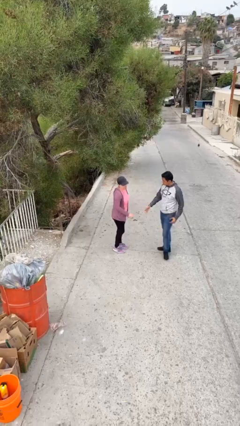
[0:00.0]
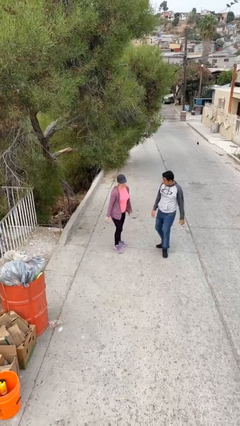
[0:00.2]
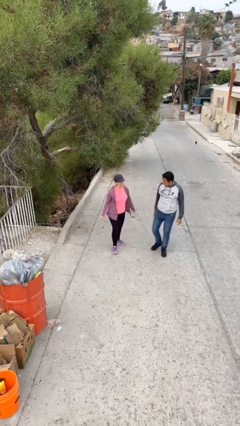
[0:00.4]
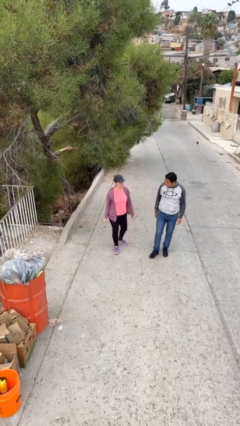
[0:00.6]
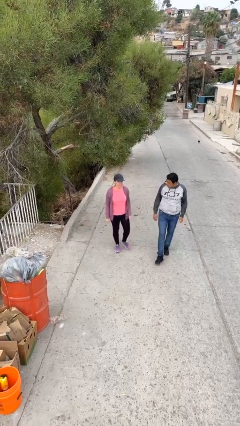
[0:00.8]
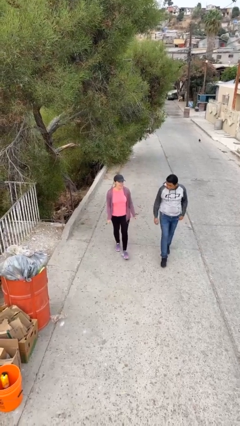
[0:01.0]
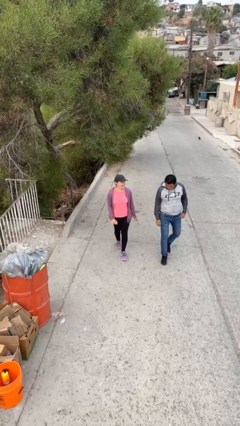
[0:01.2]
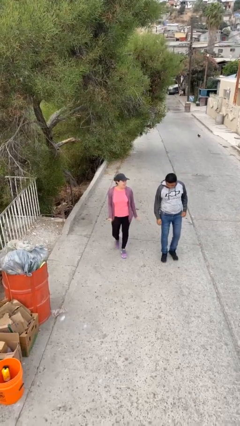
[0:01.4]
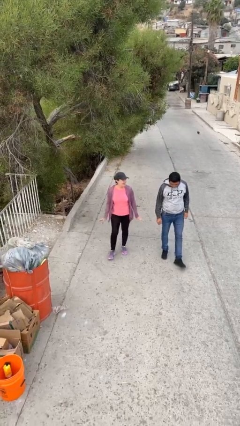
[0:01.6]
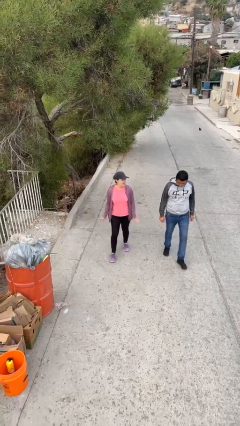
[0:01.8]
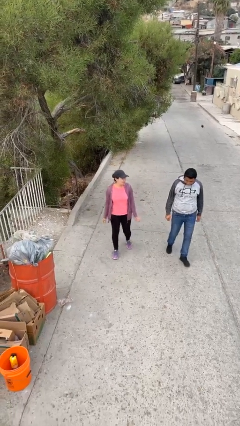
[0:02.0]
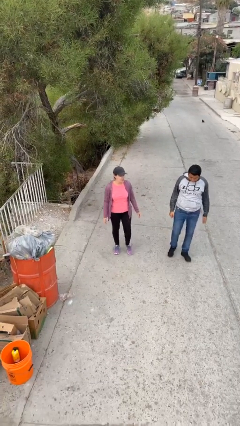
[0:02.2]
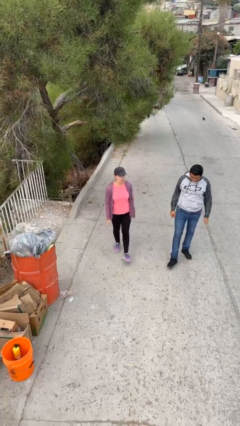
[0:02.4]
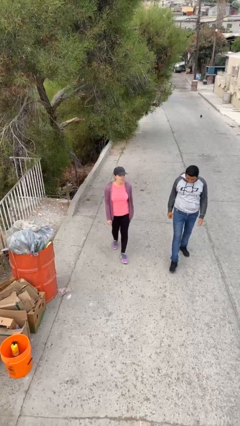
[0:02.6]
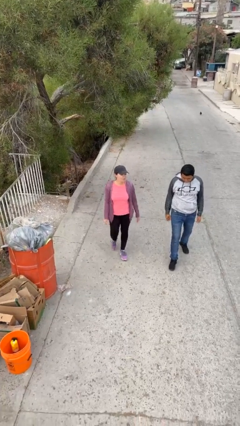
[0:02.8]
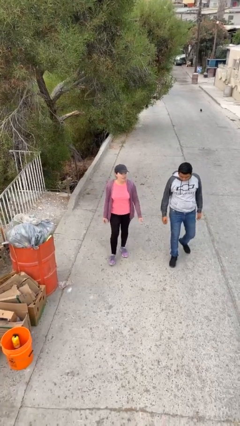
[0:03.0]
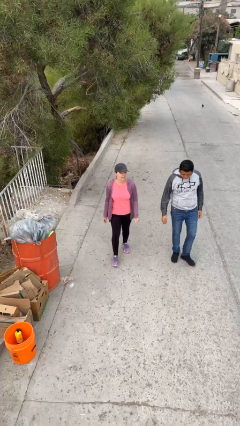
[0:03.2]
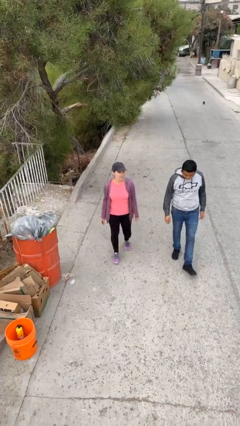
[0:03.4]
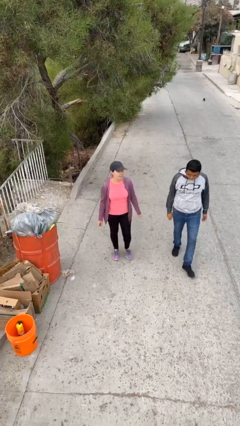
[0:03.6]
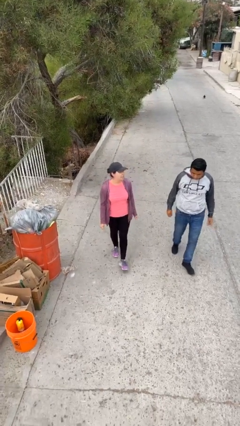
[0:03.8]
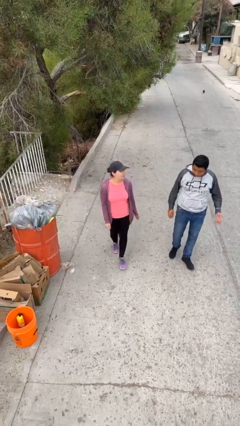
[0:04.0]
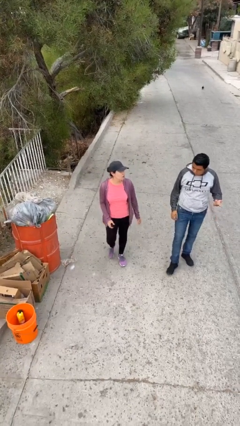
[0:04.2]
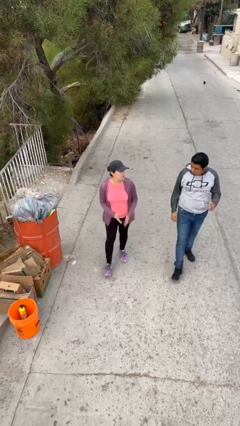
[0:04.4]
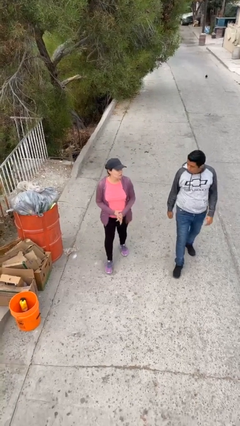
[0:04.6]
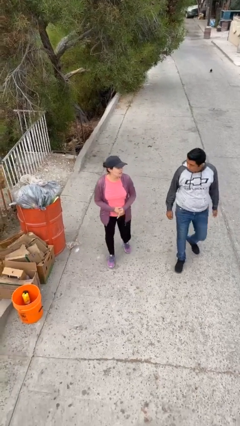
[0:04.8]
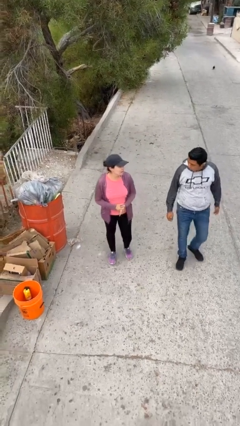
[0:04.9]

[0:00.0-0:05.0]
person talks to person

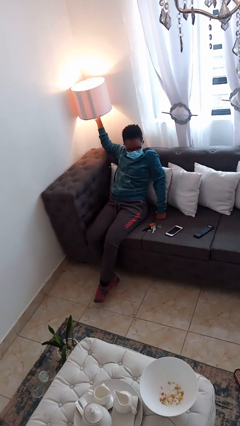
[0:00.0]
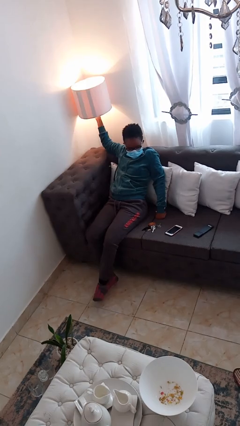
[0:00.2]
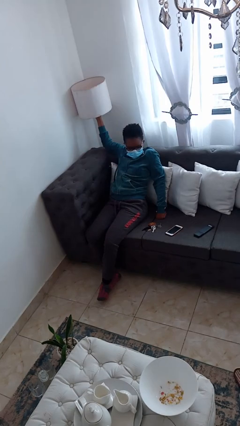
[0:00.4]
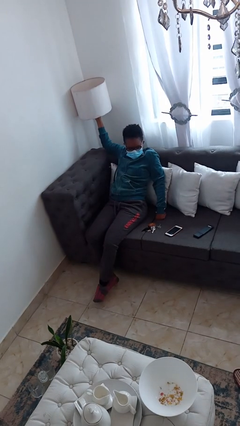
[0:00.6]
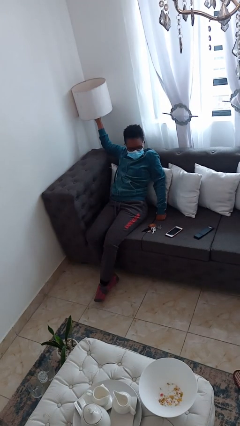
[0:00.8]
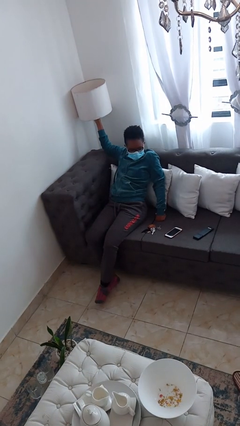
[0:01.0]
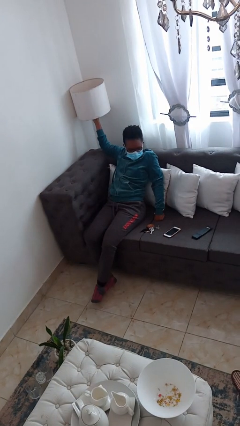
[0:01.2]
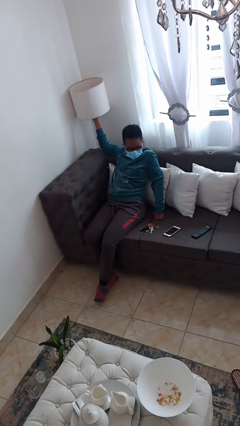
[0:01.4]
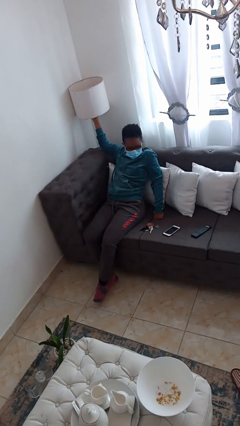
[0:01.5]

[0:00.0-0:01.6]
person turns off lamp

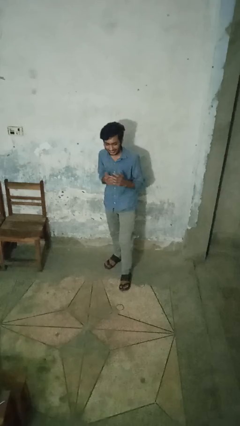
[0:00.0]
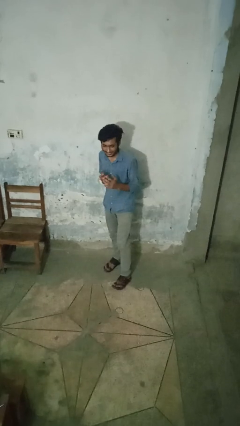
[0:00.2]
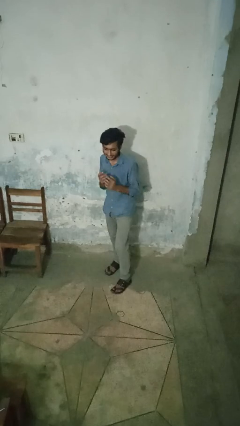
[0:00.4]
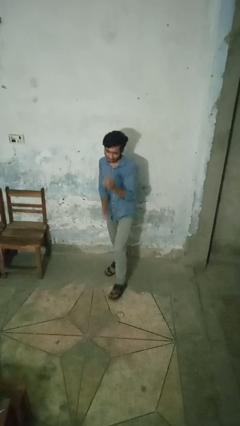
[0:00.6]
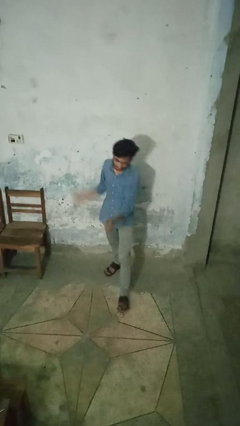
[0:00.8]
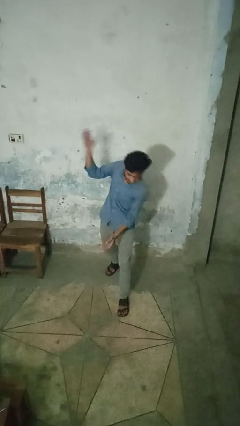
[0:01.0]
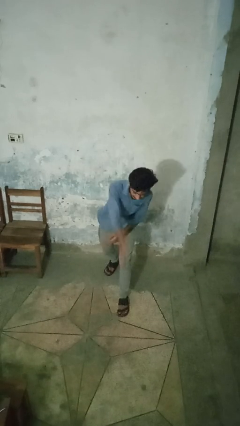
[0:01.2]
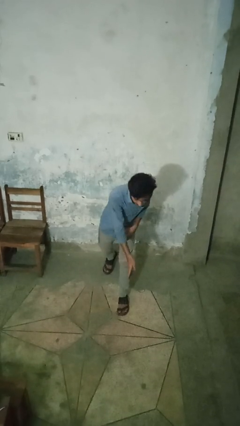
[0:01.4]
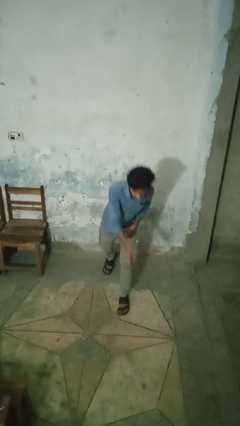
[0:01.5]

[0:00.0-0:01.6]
person karate chop

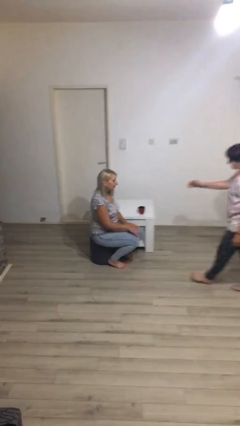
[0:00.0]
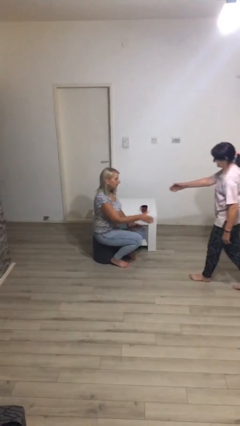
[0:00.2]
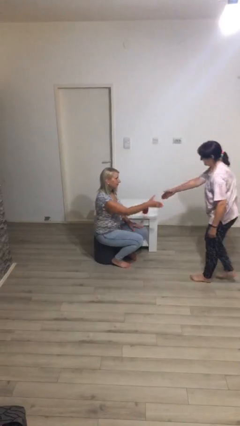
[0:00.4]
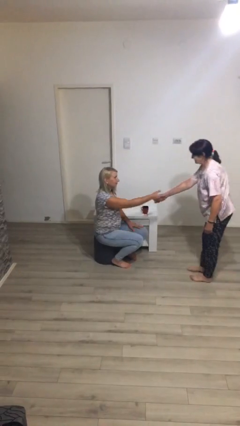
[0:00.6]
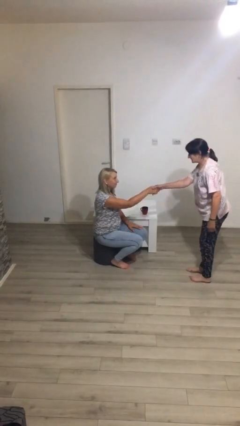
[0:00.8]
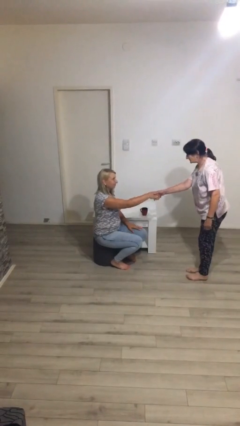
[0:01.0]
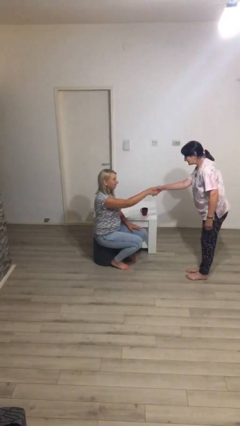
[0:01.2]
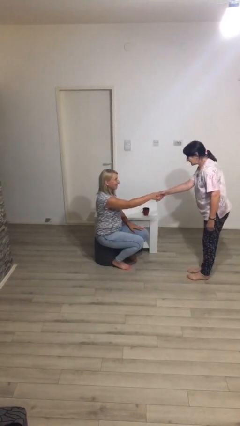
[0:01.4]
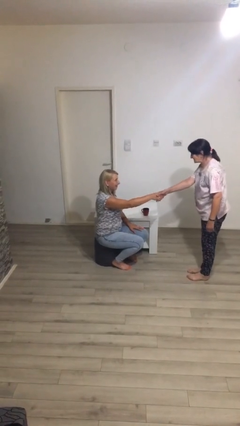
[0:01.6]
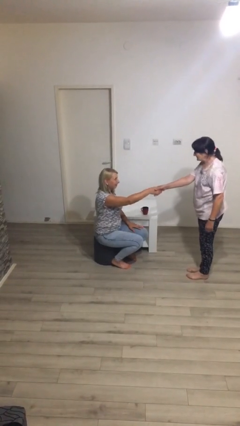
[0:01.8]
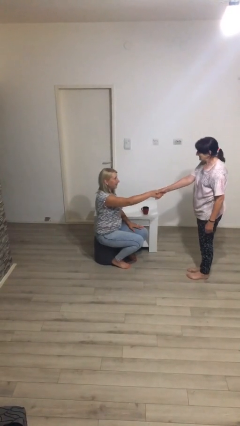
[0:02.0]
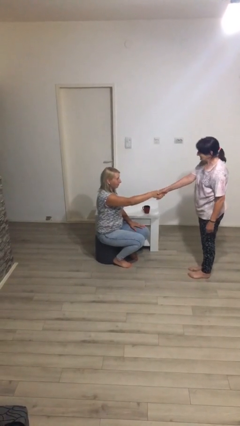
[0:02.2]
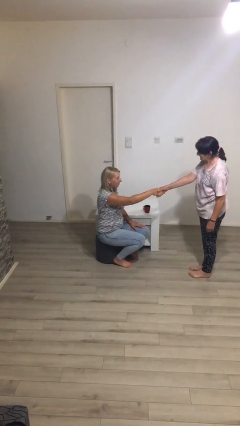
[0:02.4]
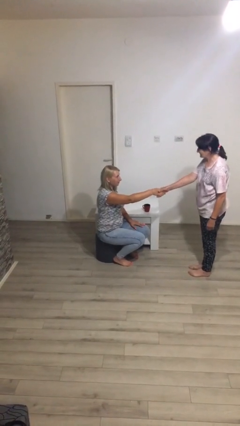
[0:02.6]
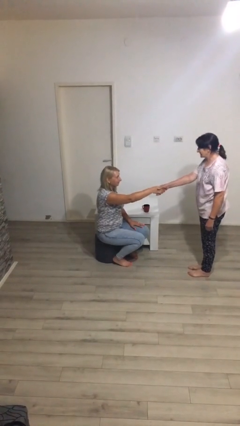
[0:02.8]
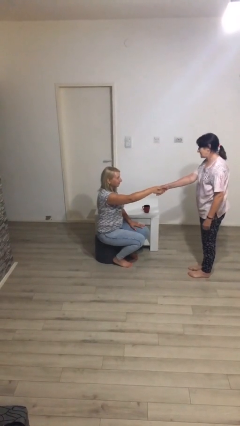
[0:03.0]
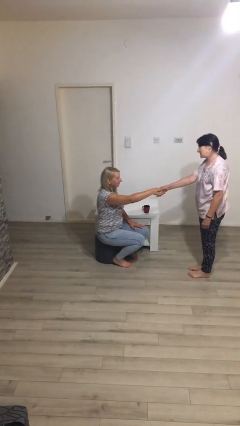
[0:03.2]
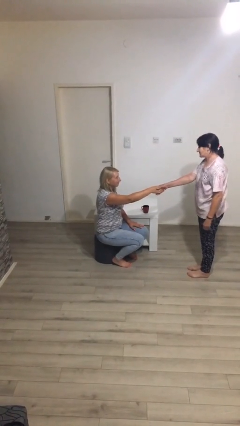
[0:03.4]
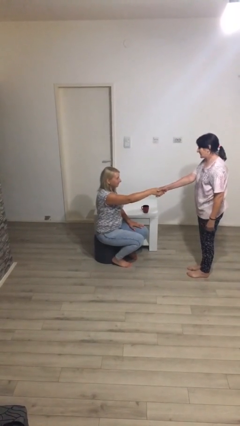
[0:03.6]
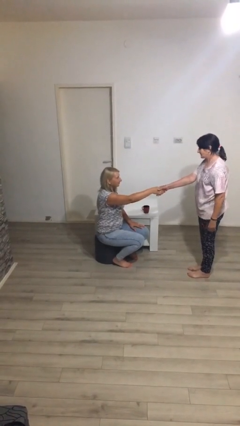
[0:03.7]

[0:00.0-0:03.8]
person shakes hand

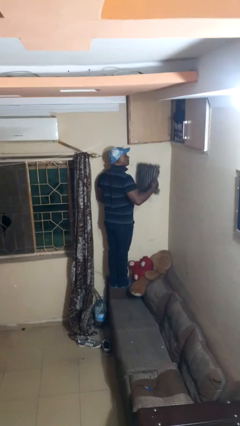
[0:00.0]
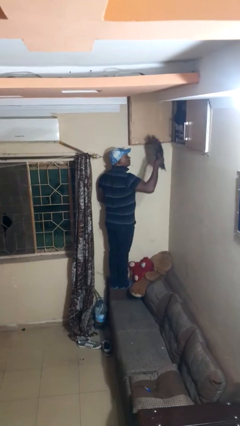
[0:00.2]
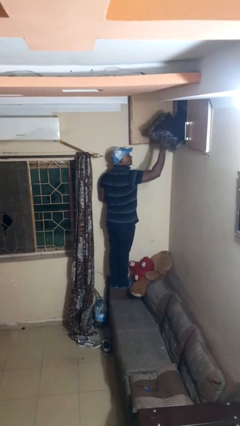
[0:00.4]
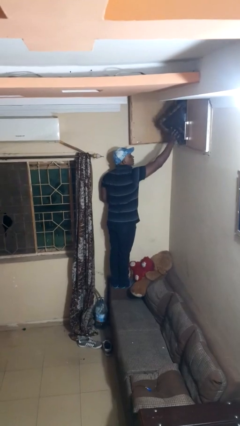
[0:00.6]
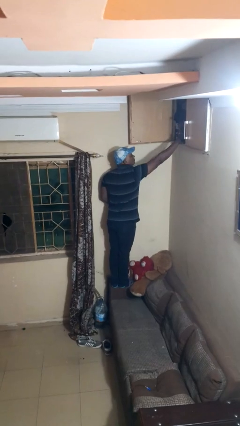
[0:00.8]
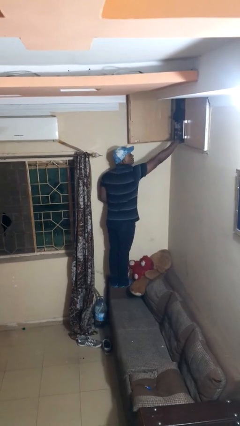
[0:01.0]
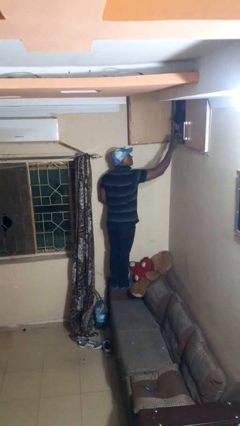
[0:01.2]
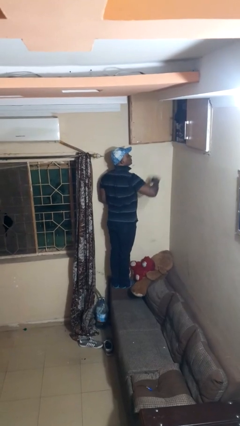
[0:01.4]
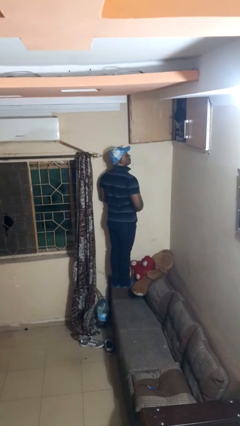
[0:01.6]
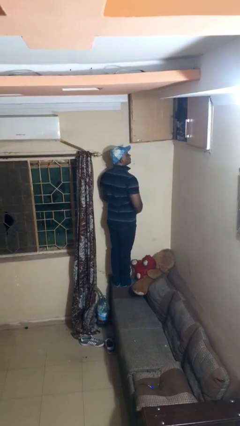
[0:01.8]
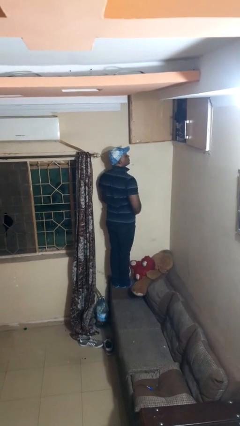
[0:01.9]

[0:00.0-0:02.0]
person puts object in cabinet

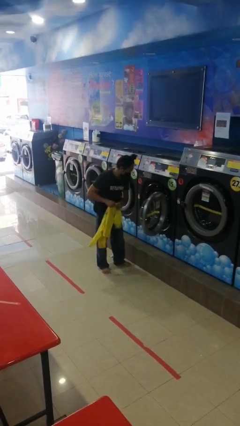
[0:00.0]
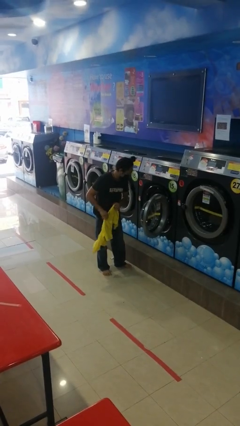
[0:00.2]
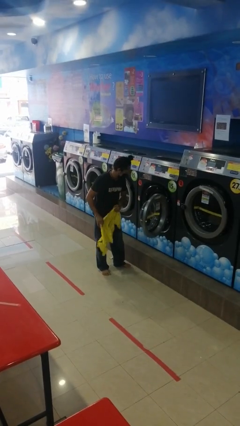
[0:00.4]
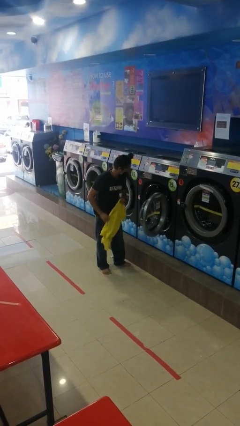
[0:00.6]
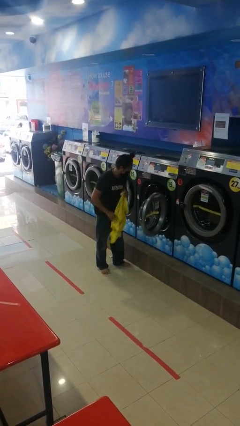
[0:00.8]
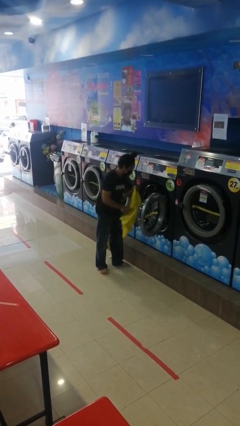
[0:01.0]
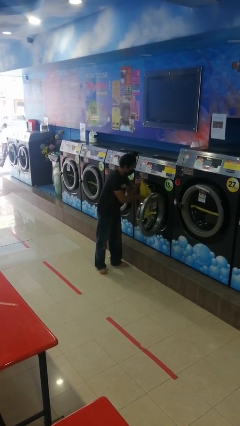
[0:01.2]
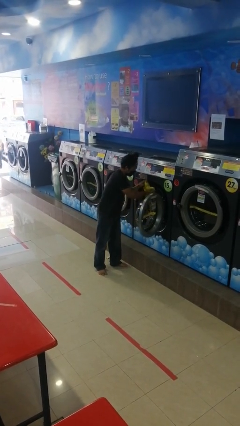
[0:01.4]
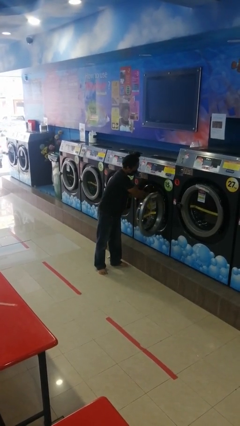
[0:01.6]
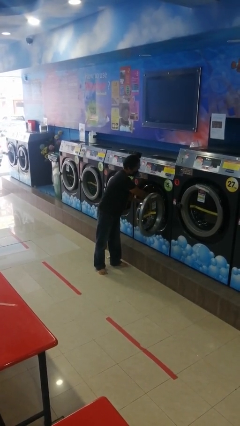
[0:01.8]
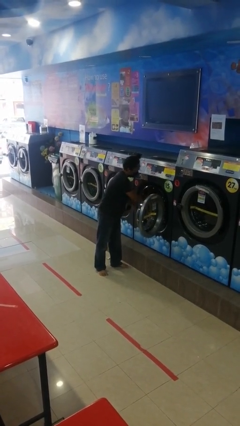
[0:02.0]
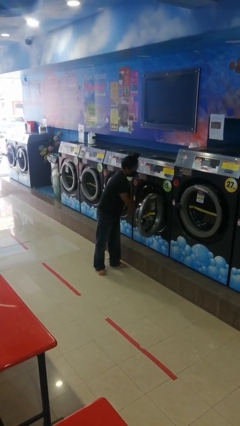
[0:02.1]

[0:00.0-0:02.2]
person loads clotheswasher

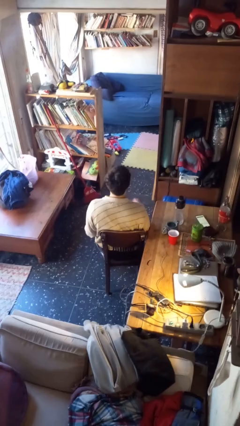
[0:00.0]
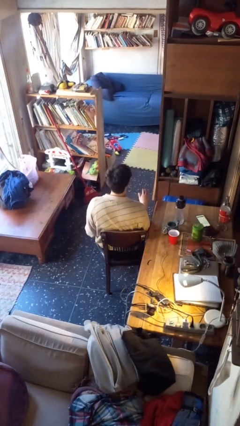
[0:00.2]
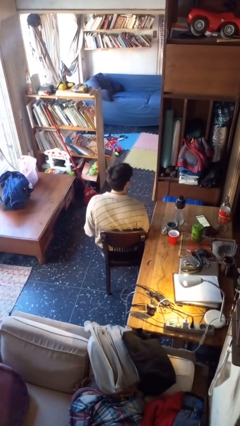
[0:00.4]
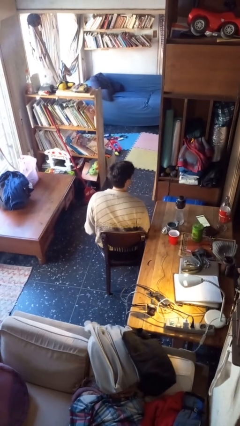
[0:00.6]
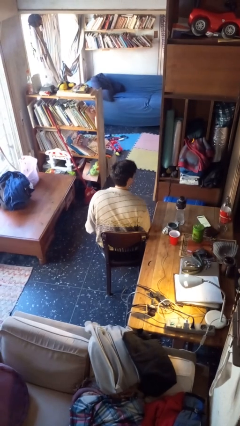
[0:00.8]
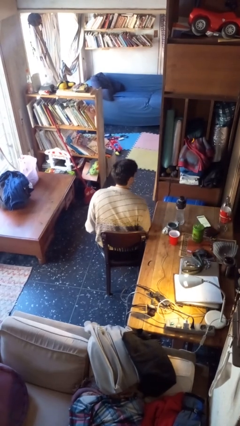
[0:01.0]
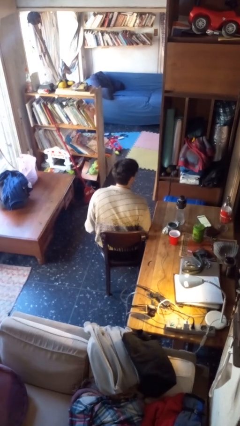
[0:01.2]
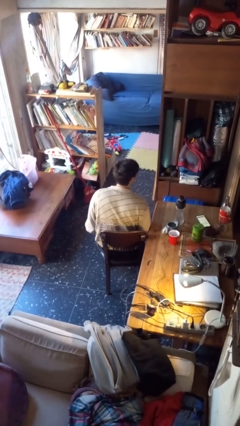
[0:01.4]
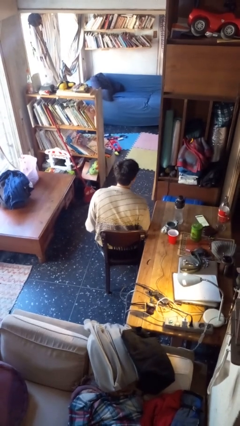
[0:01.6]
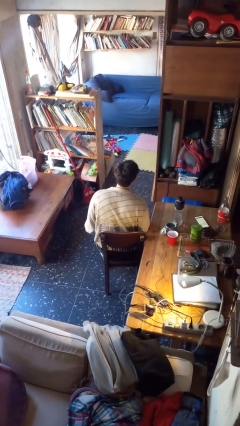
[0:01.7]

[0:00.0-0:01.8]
person slaps hands on thighs
